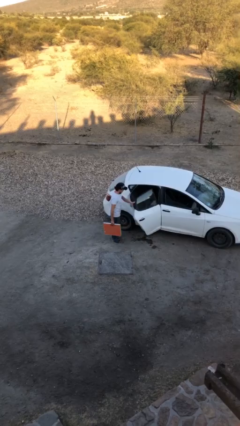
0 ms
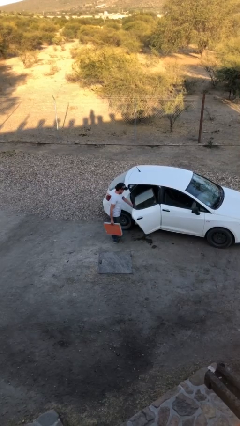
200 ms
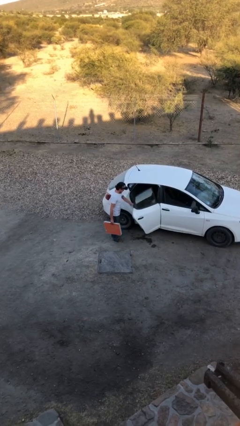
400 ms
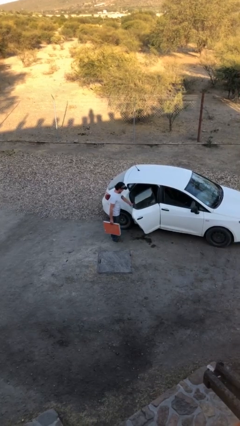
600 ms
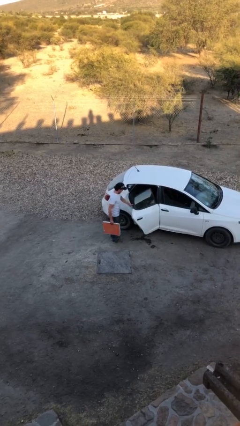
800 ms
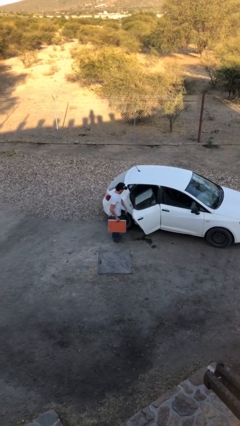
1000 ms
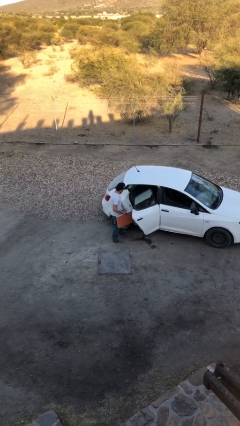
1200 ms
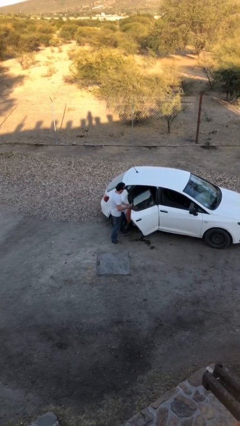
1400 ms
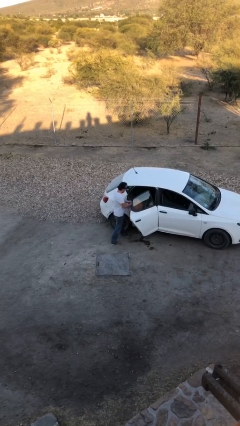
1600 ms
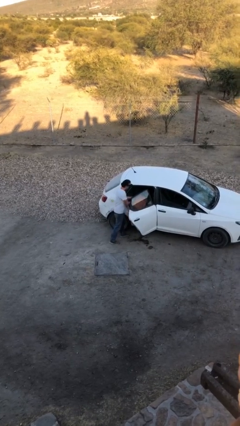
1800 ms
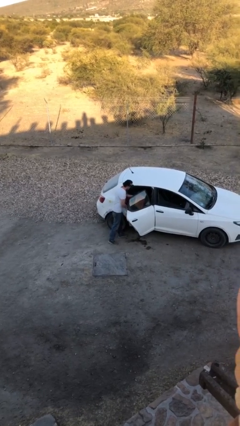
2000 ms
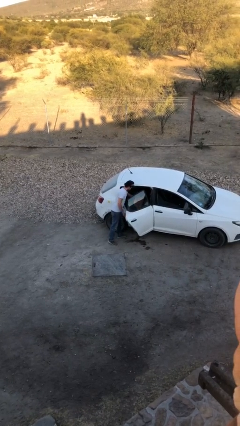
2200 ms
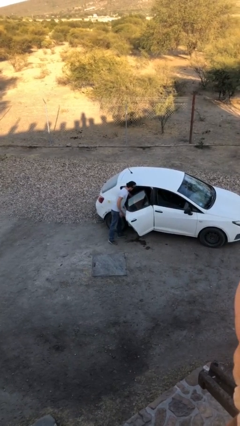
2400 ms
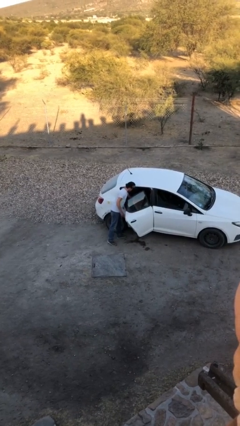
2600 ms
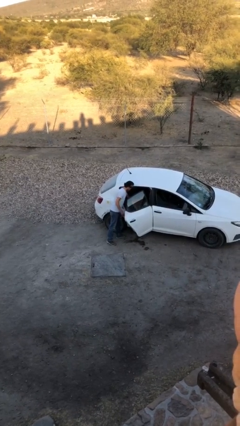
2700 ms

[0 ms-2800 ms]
person loads car

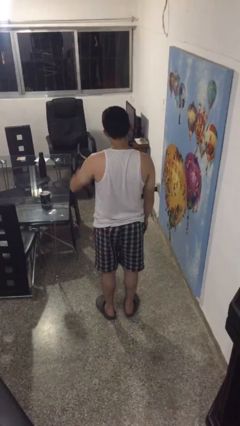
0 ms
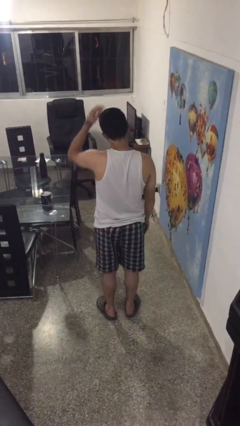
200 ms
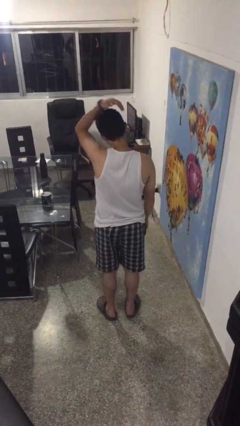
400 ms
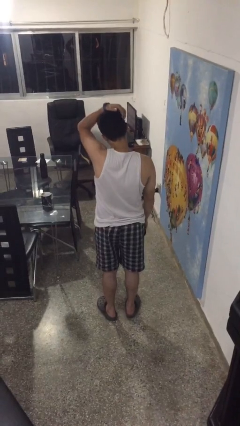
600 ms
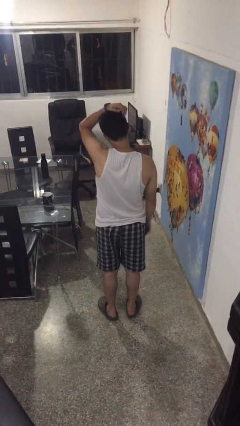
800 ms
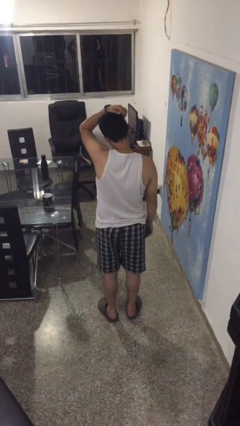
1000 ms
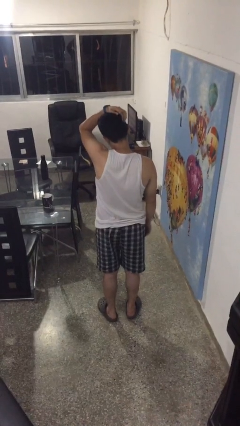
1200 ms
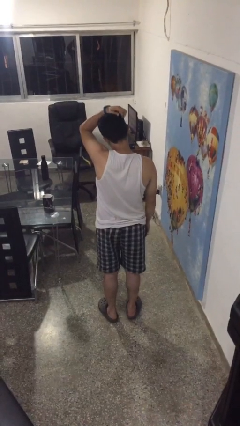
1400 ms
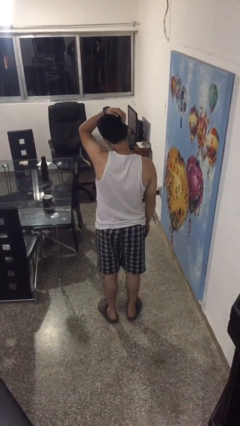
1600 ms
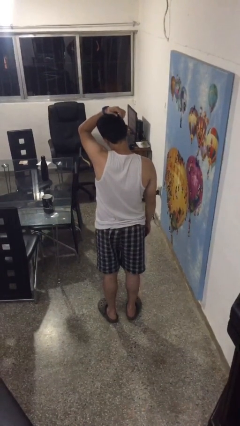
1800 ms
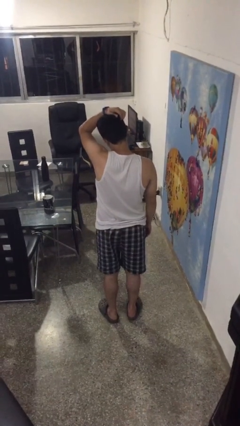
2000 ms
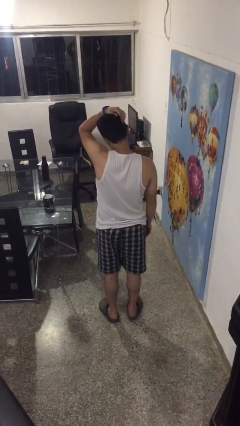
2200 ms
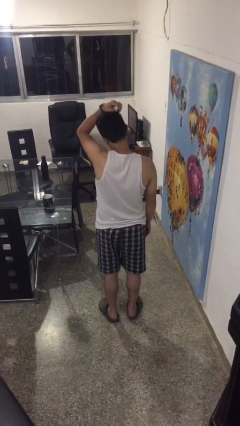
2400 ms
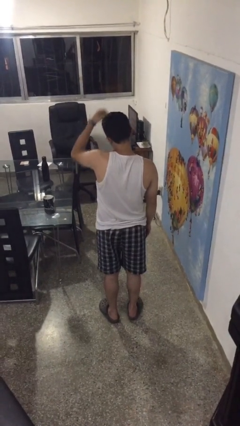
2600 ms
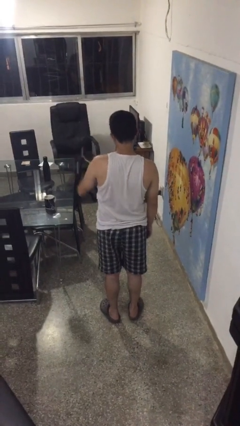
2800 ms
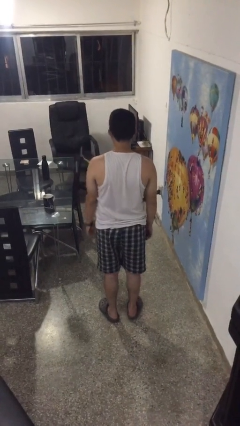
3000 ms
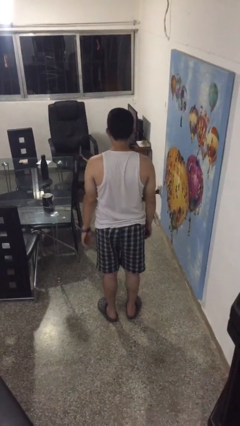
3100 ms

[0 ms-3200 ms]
person scratches face

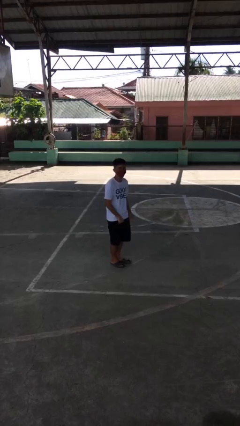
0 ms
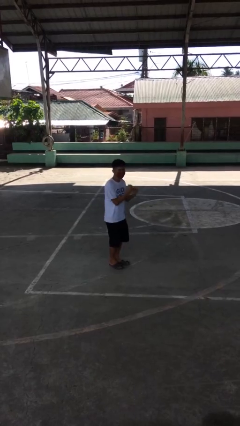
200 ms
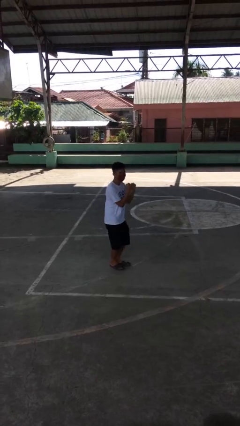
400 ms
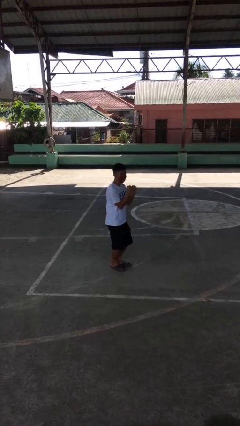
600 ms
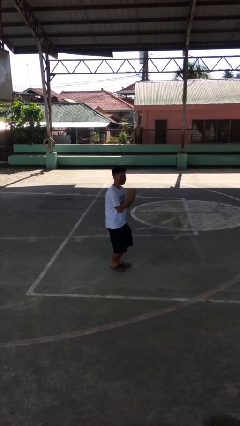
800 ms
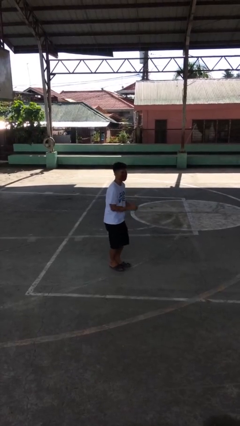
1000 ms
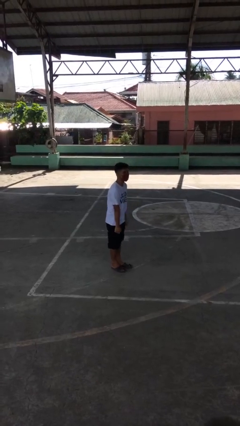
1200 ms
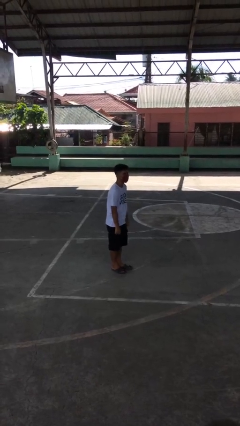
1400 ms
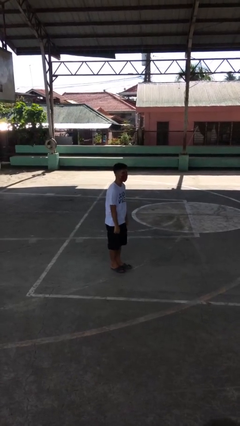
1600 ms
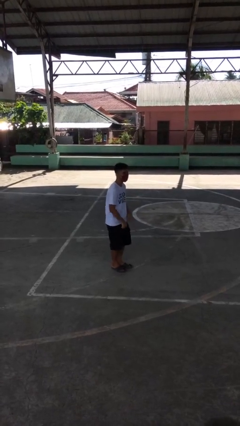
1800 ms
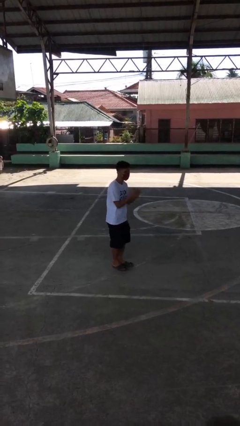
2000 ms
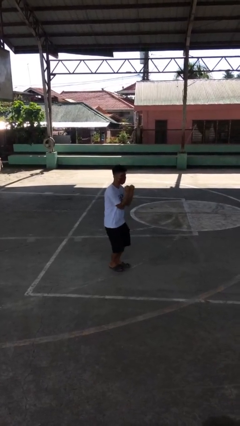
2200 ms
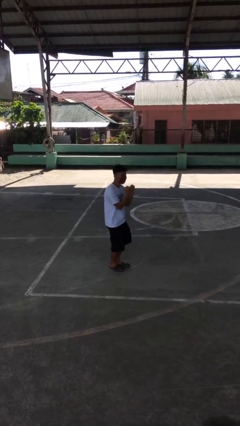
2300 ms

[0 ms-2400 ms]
person dances in place

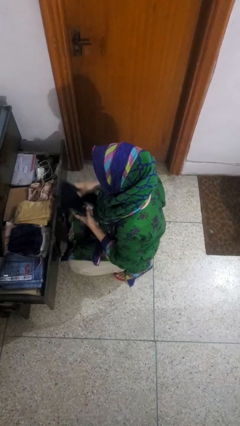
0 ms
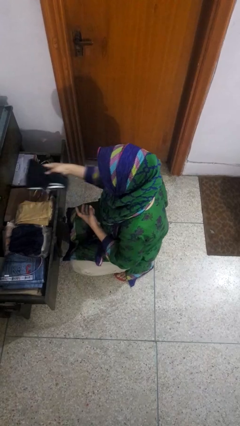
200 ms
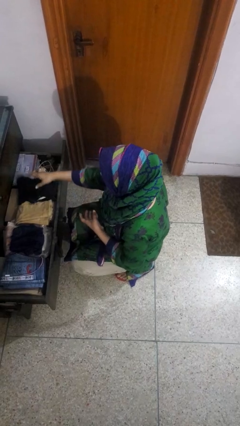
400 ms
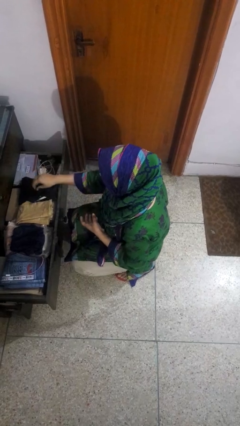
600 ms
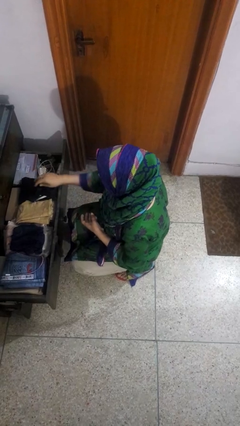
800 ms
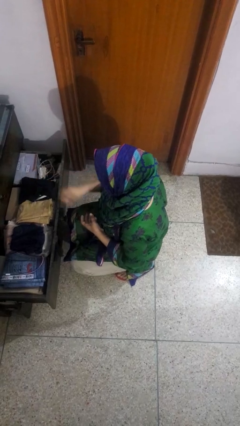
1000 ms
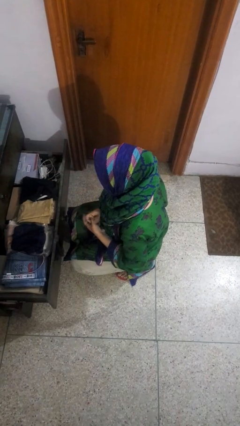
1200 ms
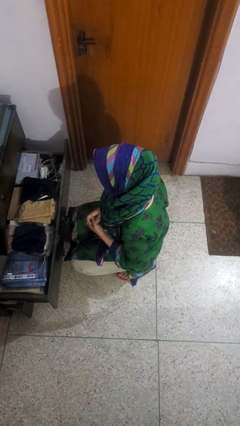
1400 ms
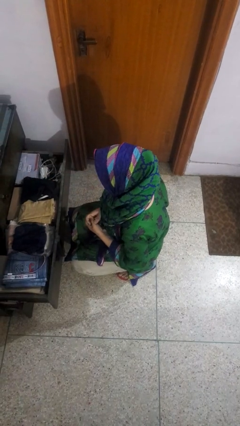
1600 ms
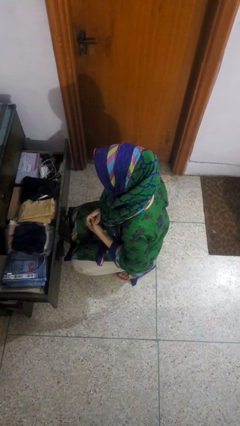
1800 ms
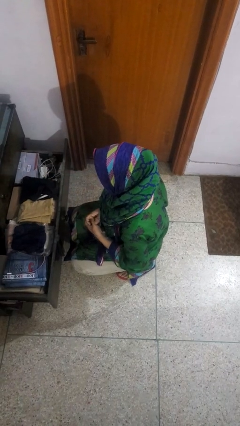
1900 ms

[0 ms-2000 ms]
person puts clothes into dresser

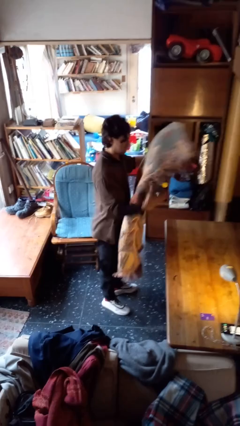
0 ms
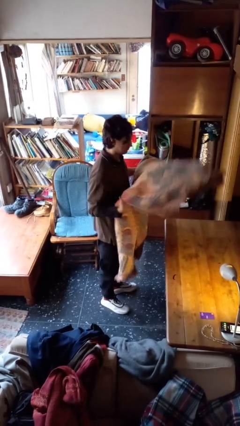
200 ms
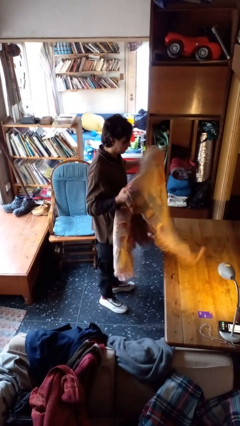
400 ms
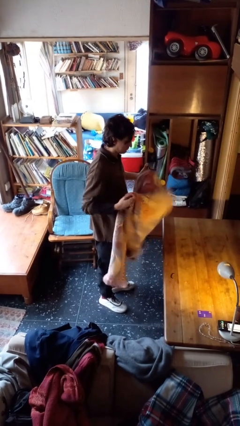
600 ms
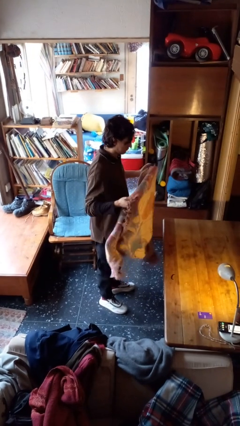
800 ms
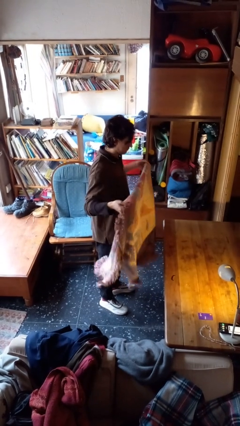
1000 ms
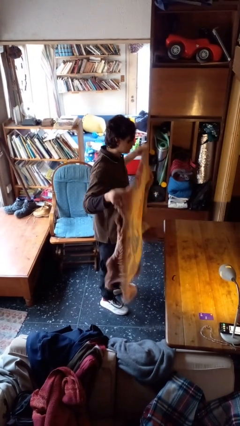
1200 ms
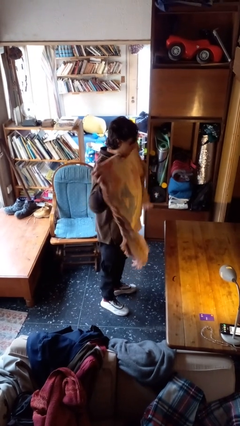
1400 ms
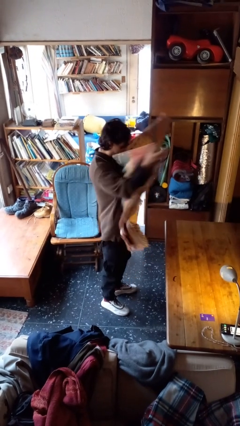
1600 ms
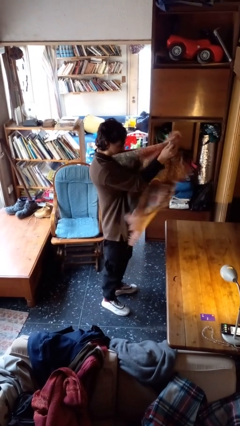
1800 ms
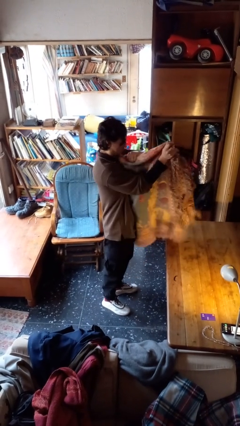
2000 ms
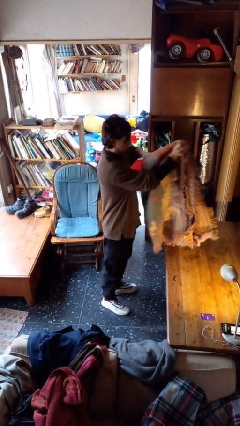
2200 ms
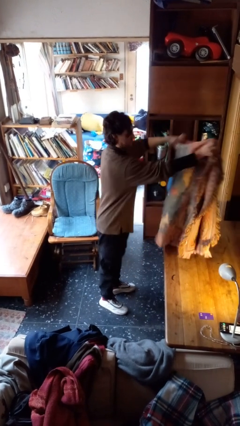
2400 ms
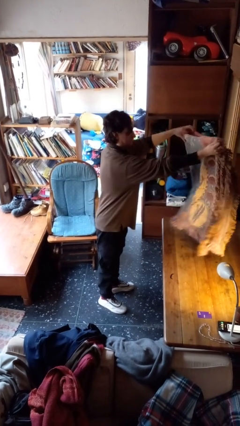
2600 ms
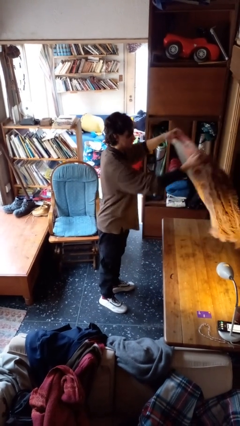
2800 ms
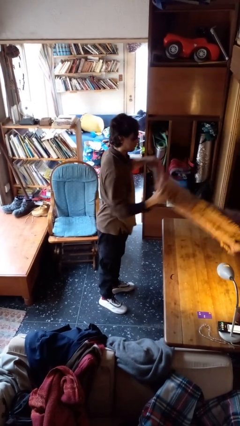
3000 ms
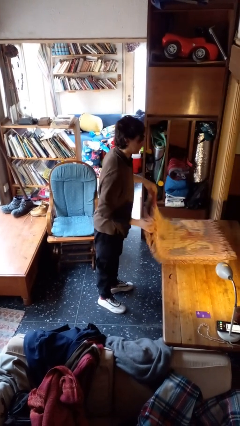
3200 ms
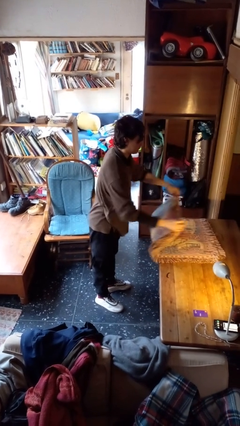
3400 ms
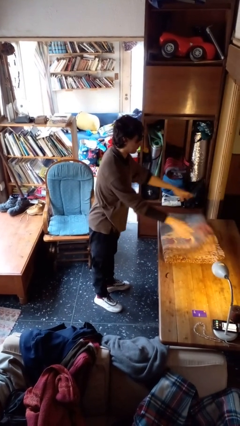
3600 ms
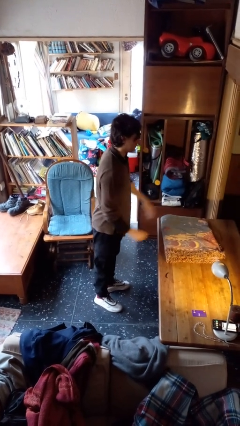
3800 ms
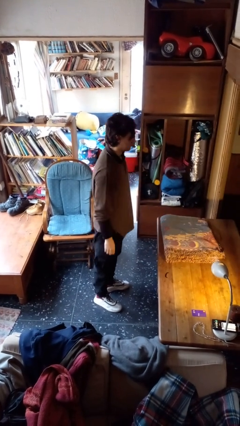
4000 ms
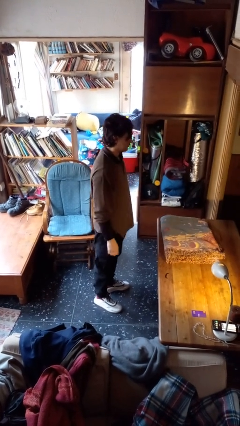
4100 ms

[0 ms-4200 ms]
person folds blanket

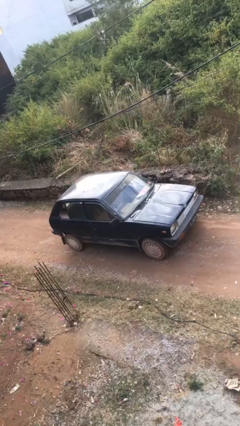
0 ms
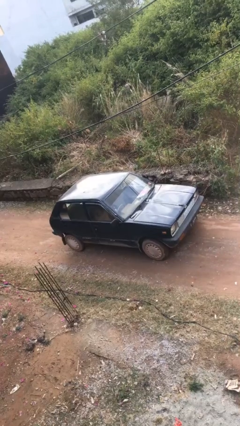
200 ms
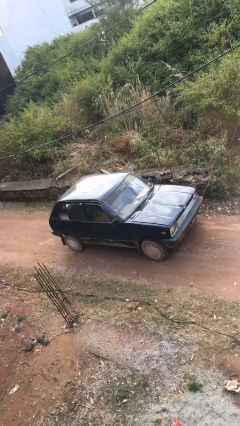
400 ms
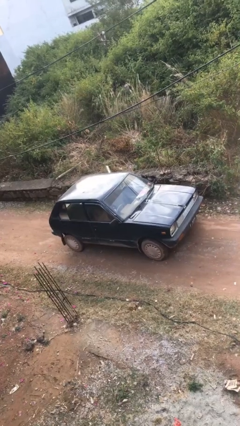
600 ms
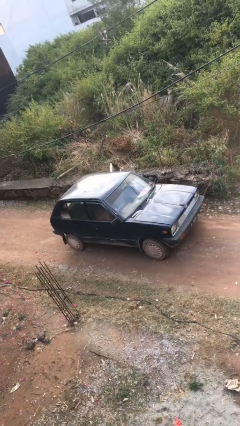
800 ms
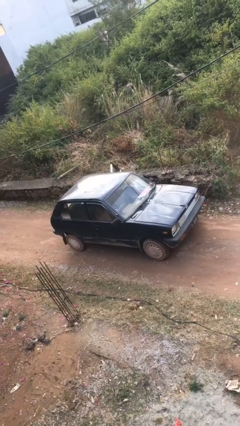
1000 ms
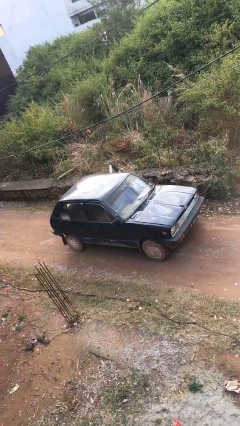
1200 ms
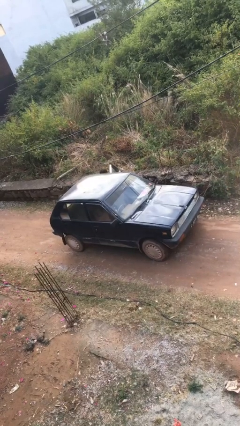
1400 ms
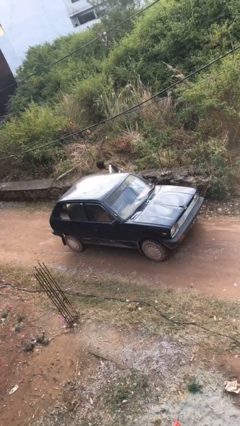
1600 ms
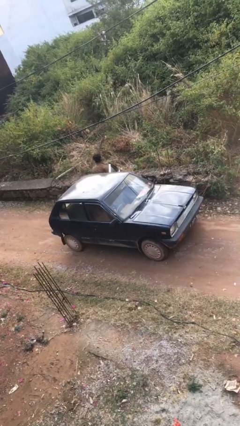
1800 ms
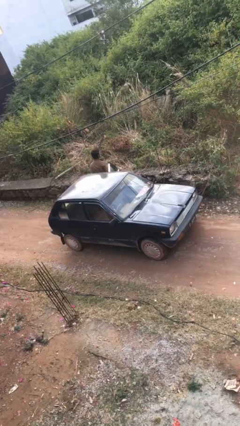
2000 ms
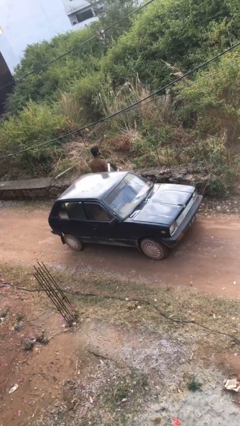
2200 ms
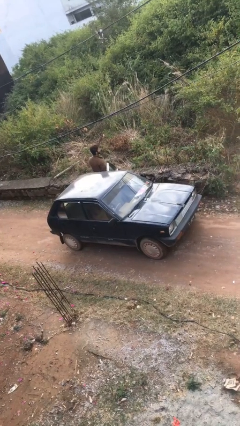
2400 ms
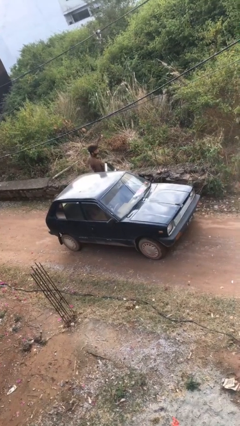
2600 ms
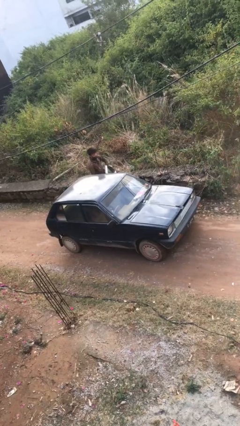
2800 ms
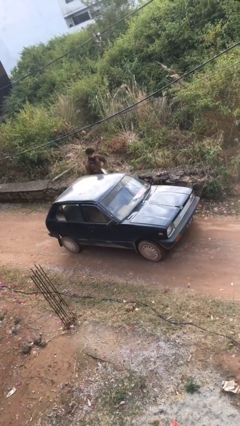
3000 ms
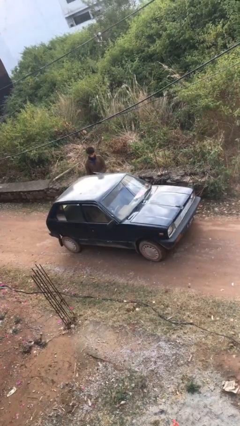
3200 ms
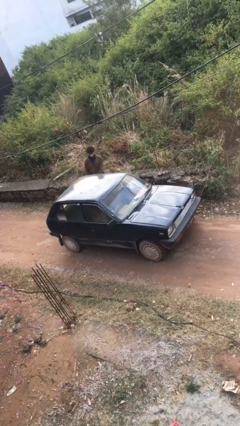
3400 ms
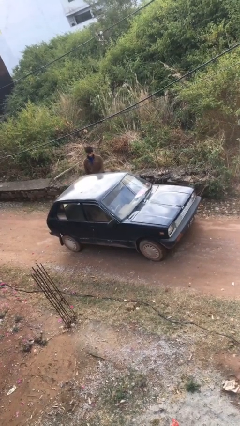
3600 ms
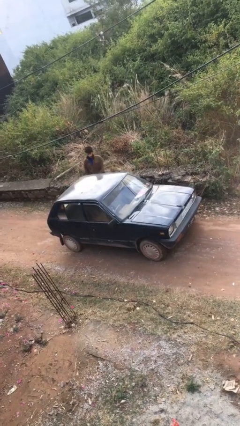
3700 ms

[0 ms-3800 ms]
car drops off person
